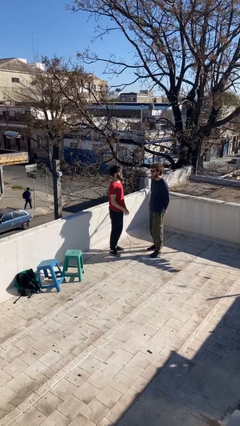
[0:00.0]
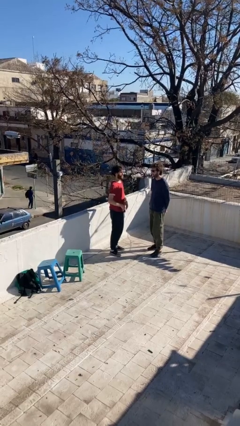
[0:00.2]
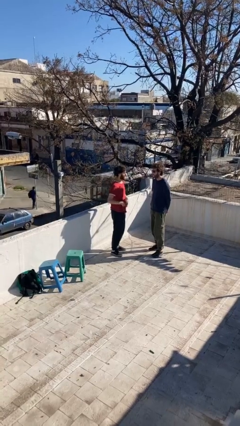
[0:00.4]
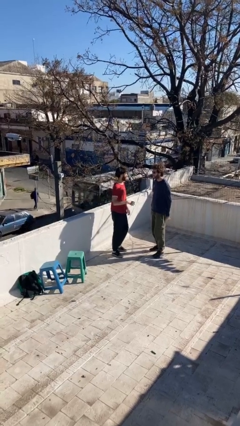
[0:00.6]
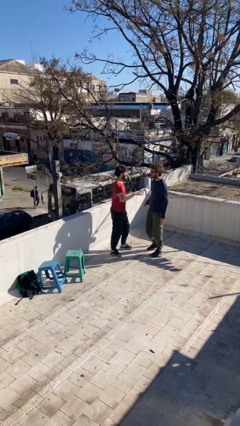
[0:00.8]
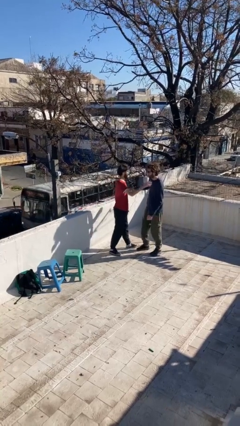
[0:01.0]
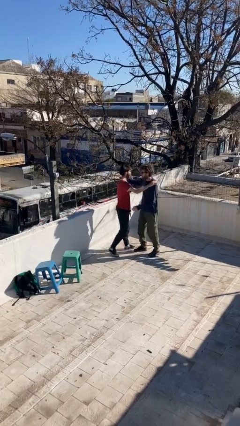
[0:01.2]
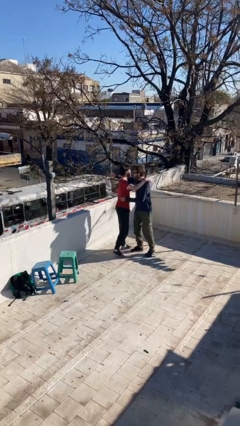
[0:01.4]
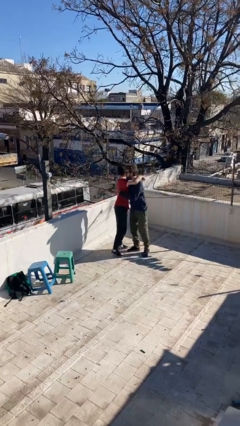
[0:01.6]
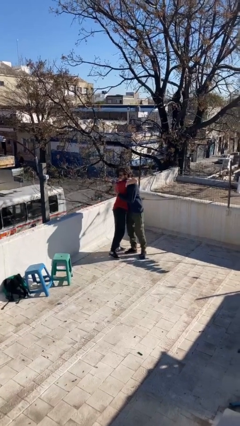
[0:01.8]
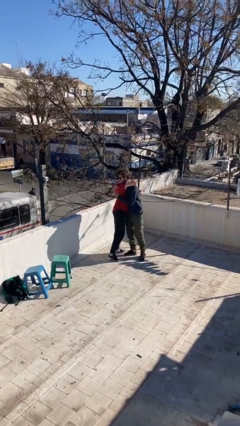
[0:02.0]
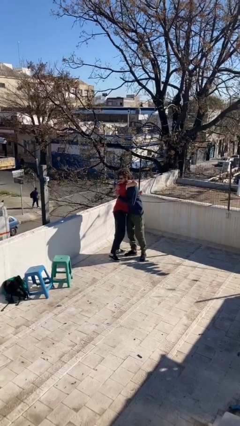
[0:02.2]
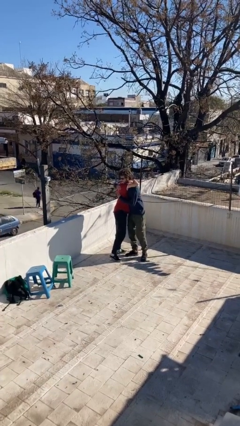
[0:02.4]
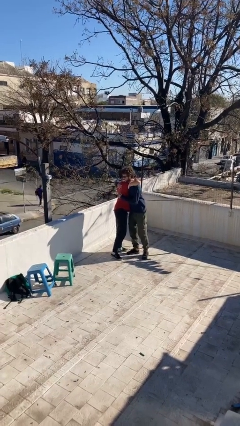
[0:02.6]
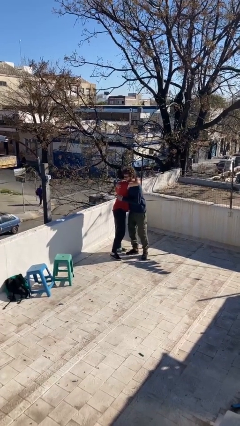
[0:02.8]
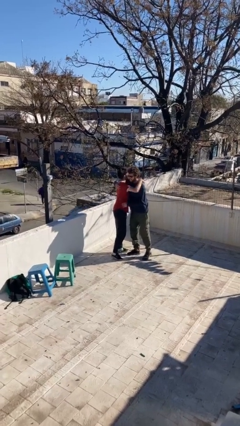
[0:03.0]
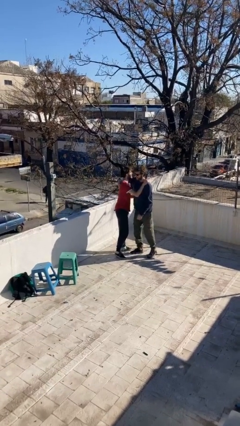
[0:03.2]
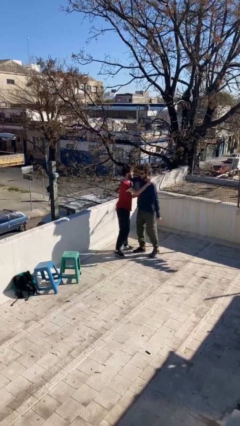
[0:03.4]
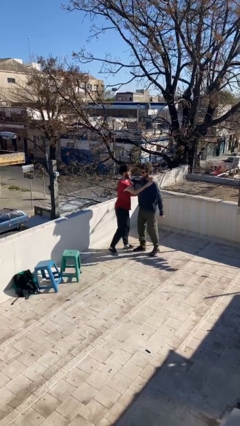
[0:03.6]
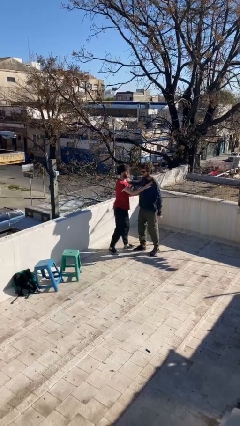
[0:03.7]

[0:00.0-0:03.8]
person embraces person

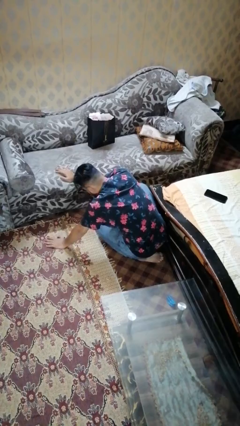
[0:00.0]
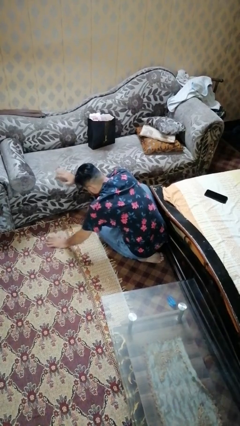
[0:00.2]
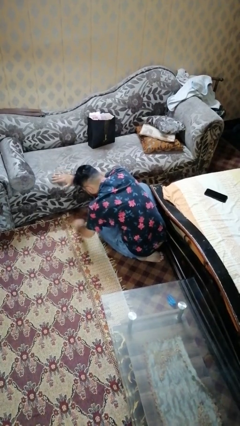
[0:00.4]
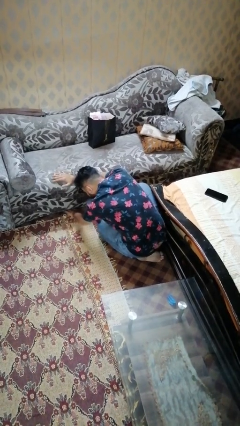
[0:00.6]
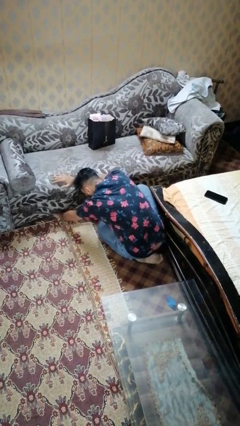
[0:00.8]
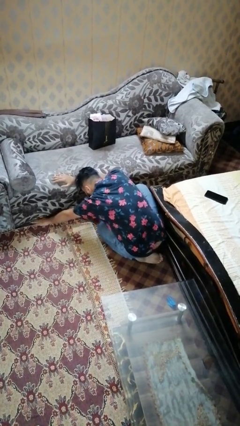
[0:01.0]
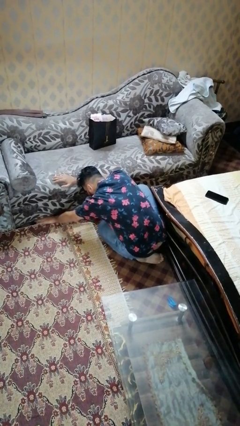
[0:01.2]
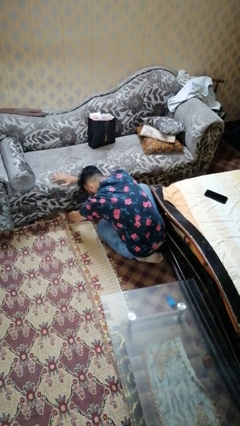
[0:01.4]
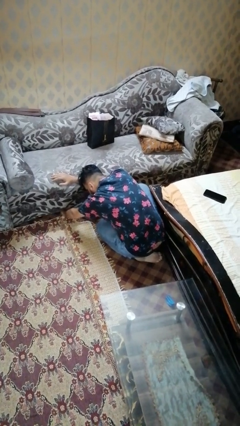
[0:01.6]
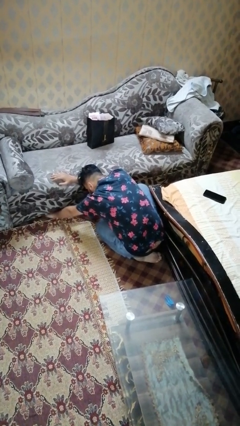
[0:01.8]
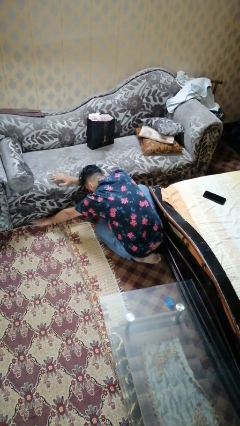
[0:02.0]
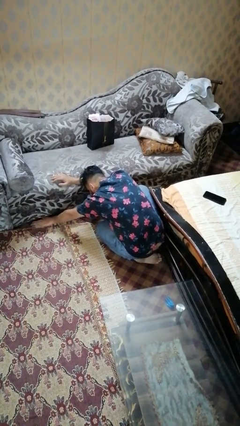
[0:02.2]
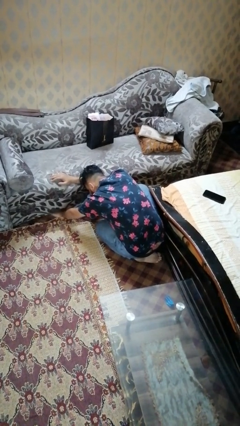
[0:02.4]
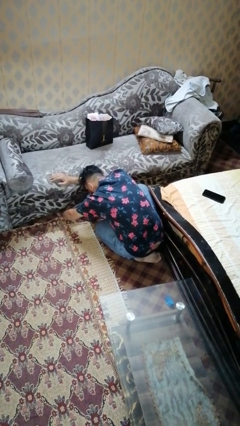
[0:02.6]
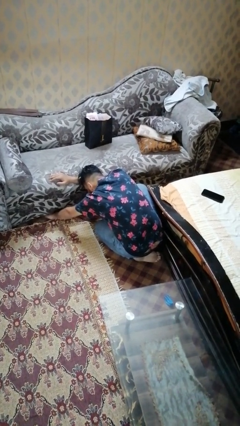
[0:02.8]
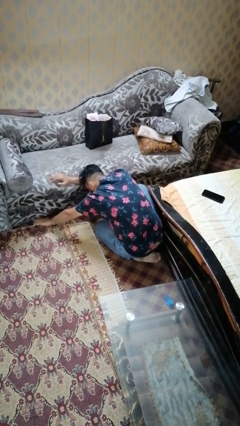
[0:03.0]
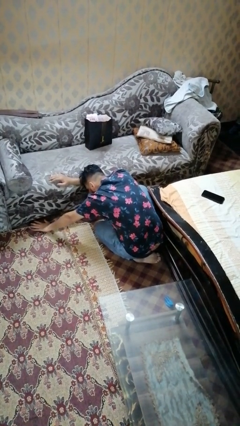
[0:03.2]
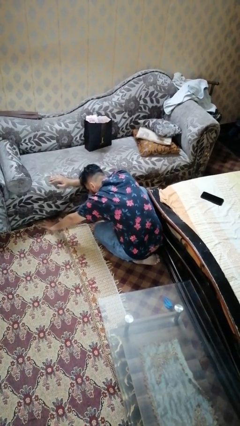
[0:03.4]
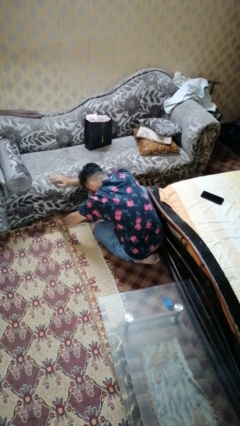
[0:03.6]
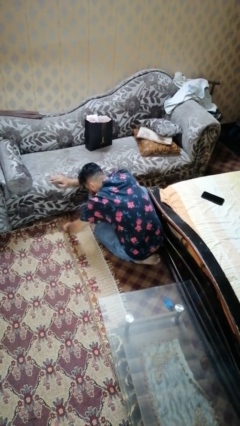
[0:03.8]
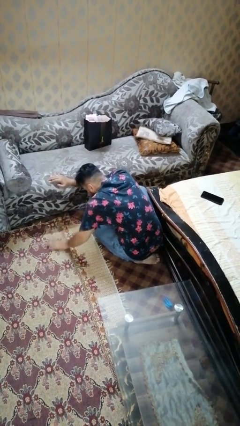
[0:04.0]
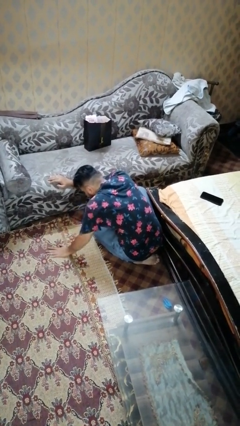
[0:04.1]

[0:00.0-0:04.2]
person searches under couch

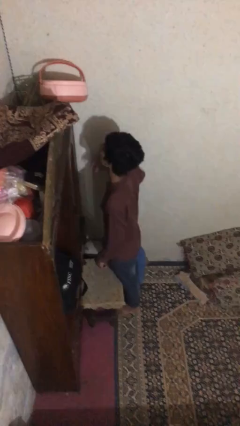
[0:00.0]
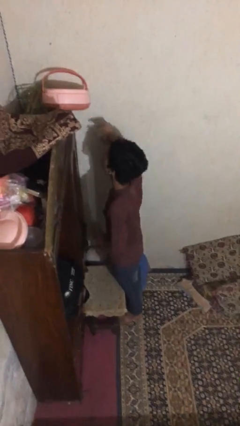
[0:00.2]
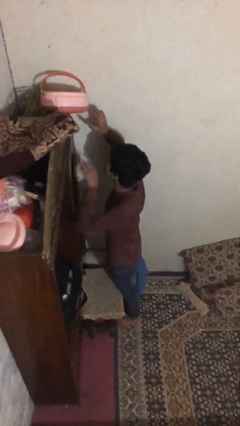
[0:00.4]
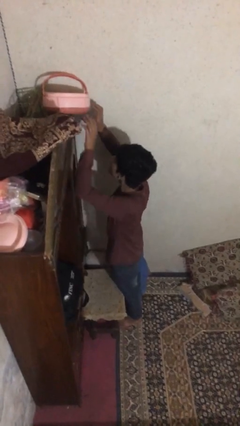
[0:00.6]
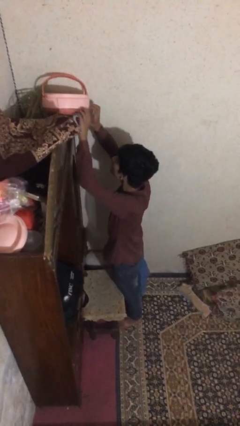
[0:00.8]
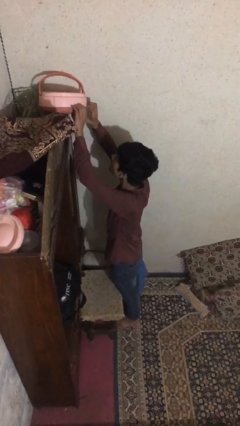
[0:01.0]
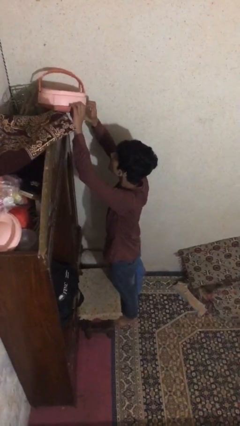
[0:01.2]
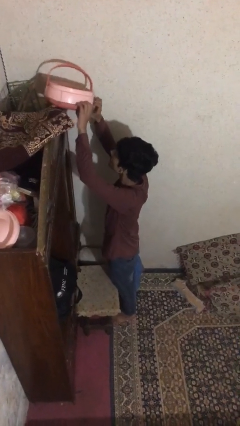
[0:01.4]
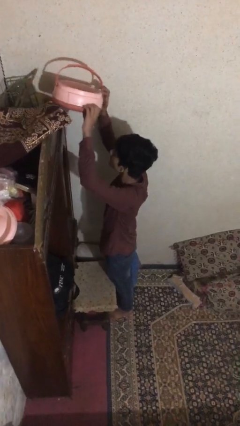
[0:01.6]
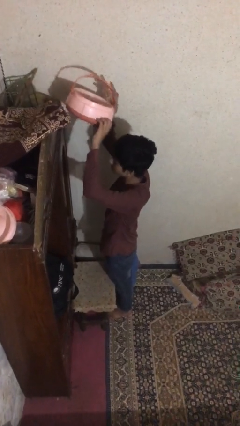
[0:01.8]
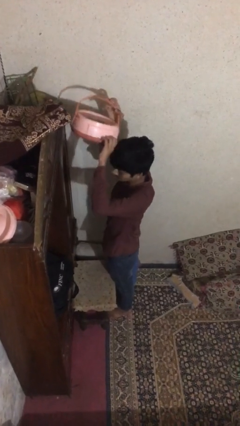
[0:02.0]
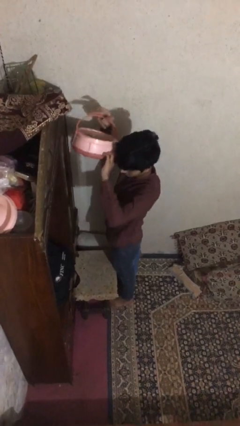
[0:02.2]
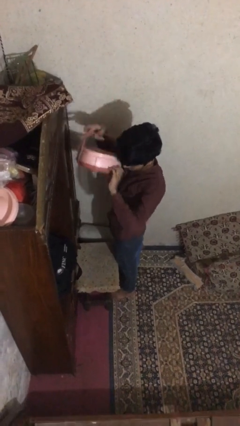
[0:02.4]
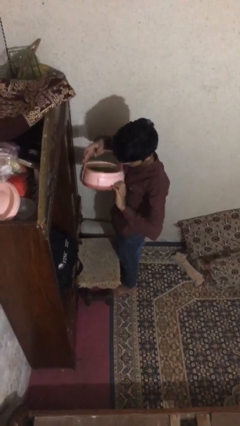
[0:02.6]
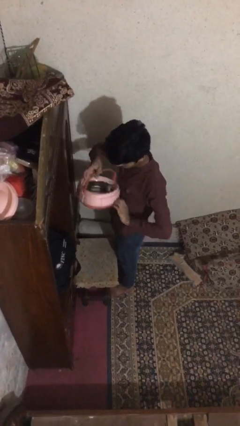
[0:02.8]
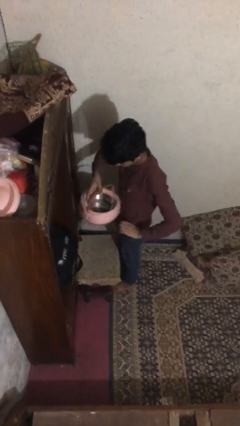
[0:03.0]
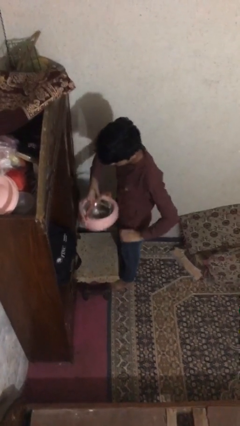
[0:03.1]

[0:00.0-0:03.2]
person picks up object from shelf

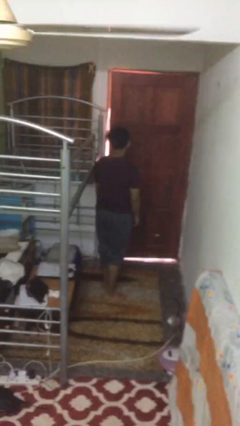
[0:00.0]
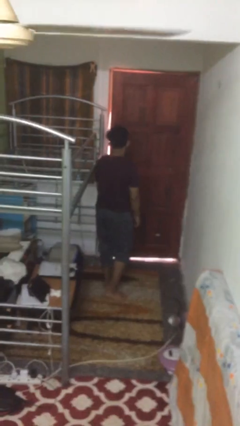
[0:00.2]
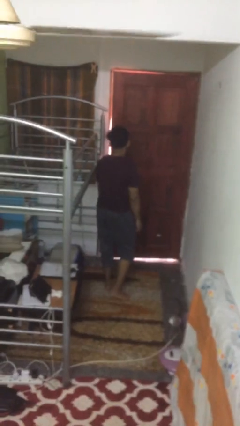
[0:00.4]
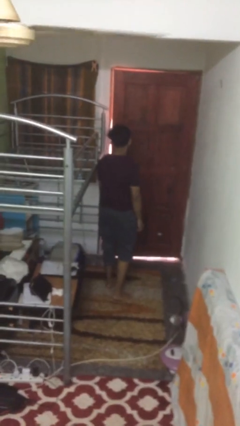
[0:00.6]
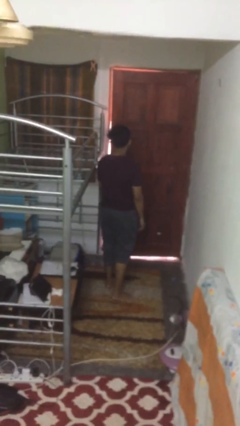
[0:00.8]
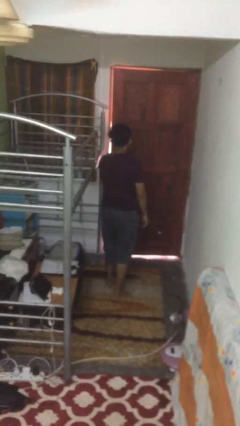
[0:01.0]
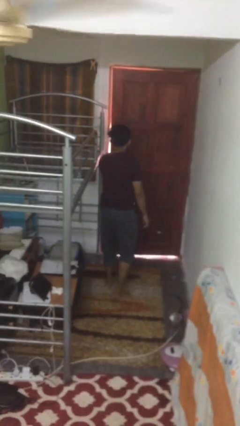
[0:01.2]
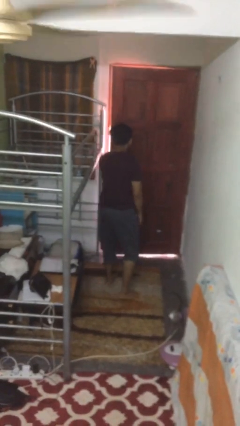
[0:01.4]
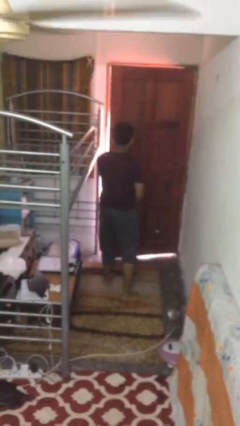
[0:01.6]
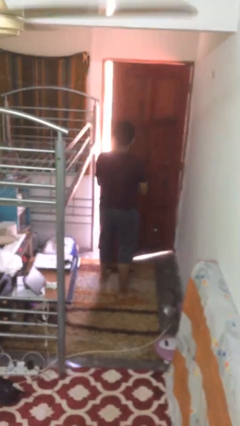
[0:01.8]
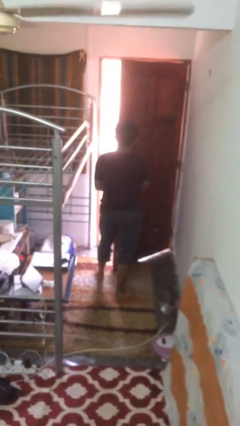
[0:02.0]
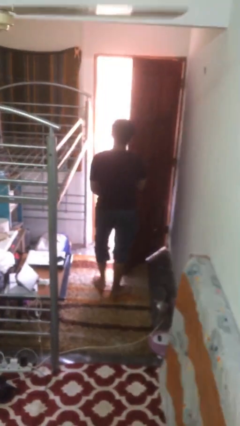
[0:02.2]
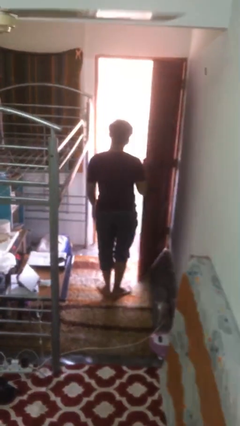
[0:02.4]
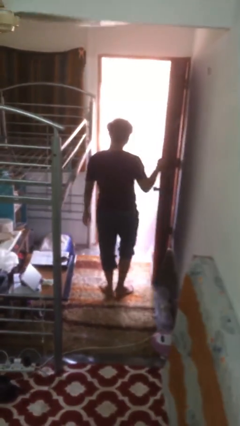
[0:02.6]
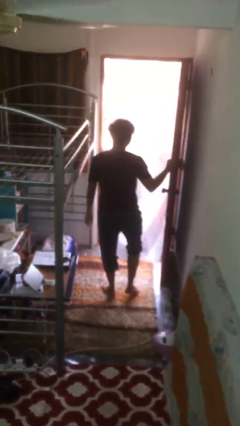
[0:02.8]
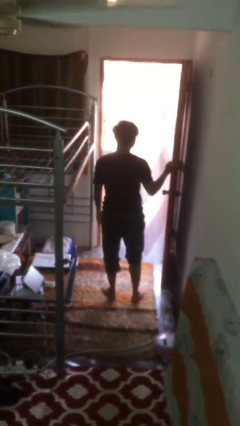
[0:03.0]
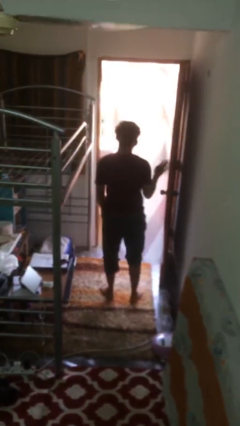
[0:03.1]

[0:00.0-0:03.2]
person opens facility door

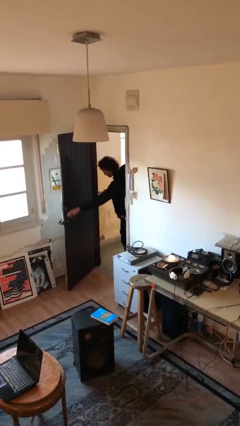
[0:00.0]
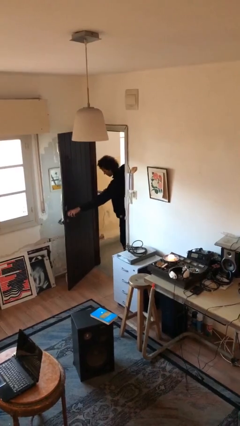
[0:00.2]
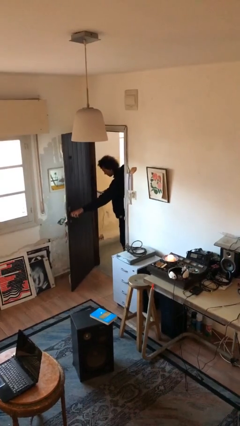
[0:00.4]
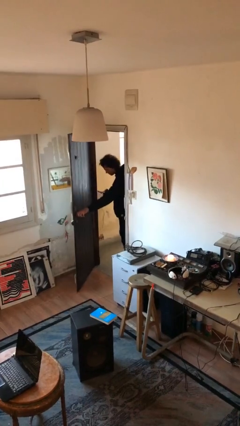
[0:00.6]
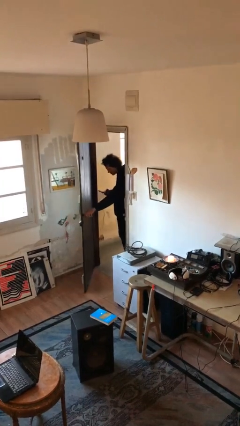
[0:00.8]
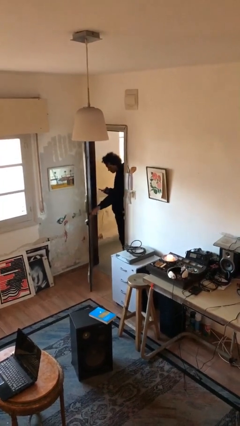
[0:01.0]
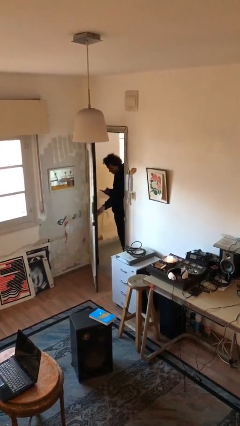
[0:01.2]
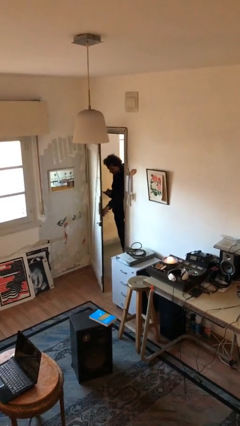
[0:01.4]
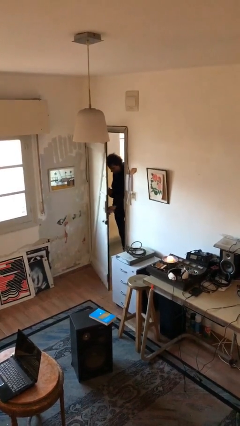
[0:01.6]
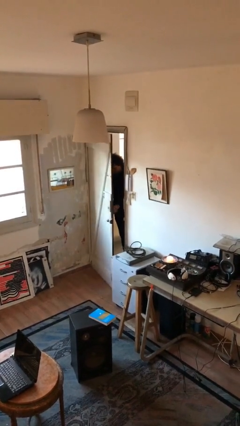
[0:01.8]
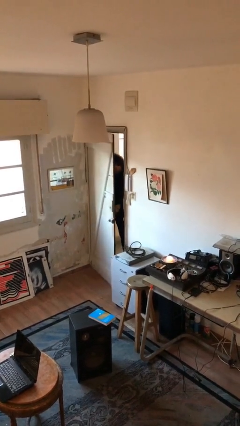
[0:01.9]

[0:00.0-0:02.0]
person closes facility door

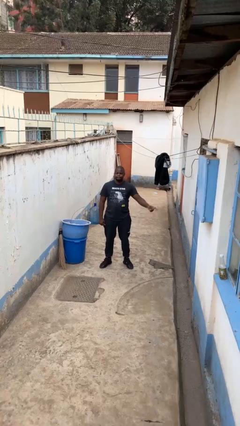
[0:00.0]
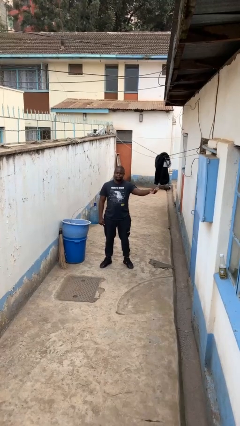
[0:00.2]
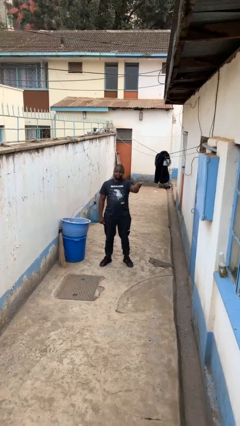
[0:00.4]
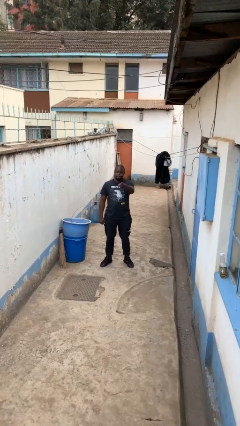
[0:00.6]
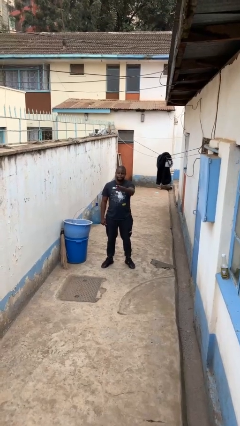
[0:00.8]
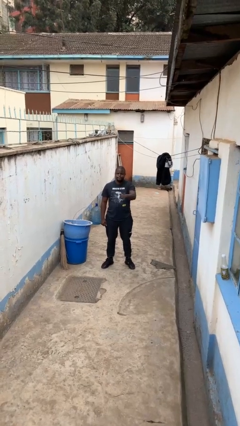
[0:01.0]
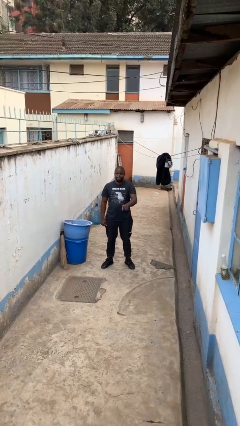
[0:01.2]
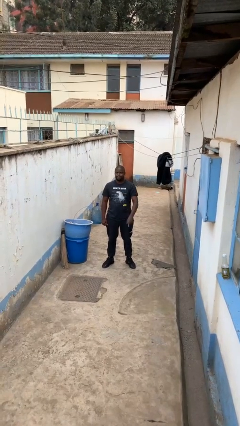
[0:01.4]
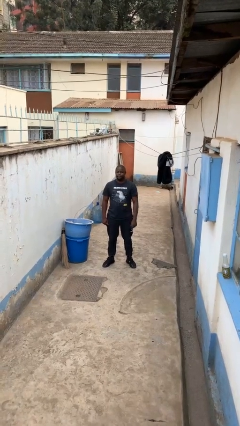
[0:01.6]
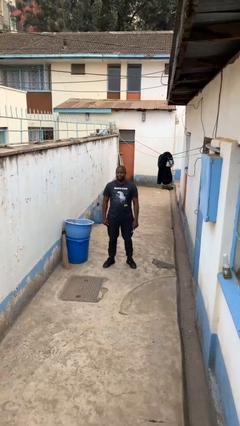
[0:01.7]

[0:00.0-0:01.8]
person gestures swipe right
